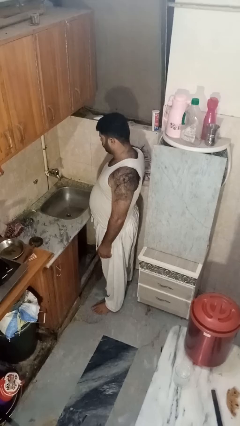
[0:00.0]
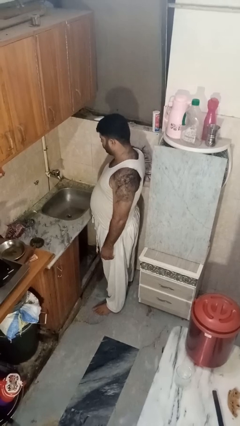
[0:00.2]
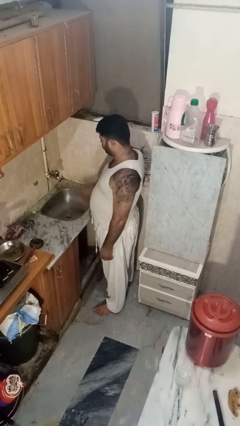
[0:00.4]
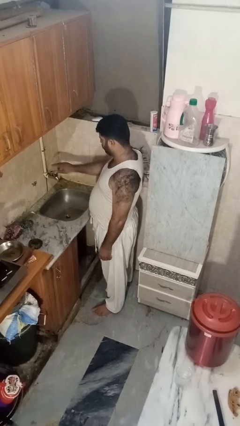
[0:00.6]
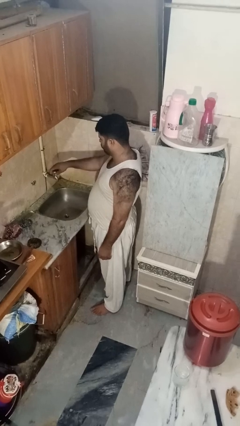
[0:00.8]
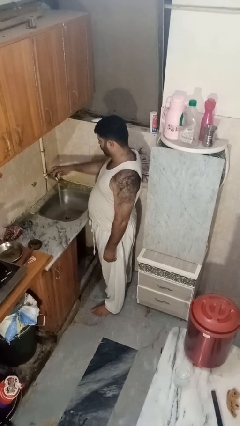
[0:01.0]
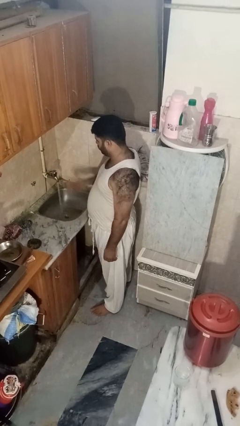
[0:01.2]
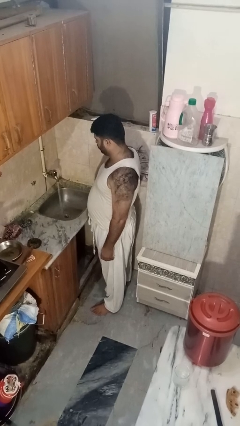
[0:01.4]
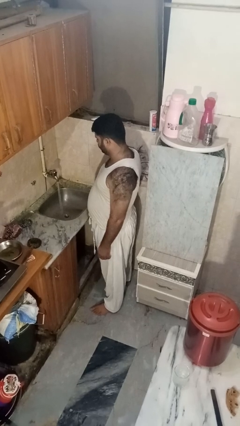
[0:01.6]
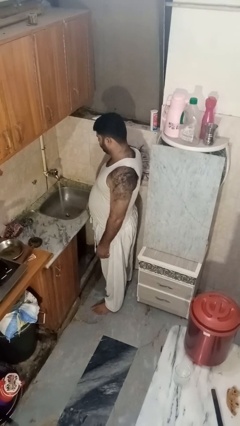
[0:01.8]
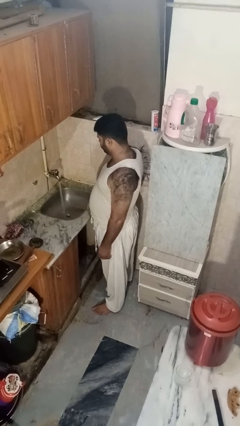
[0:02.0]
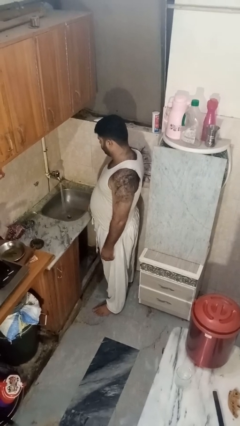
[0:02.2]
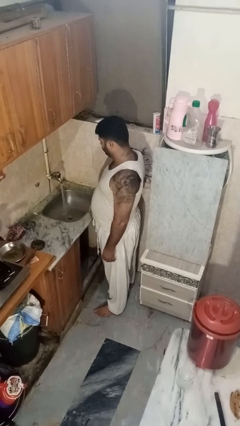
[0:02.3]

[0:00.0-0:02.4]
person turns on faucet

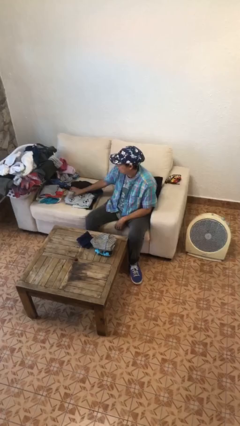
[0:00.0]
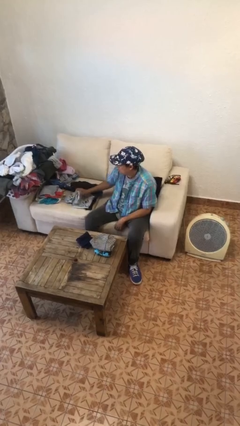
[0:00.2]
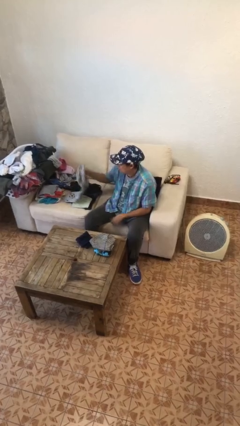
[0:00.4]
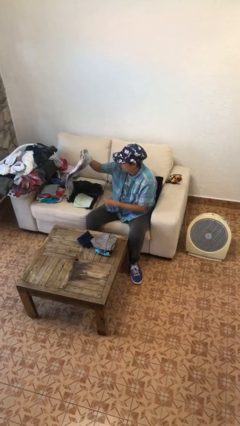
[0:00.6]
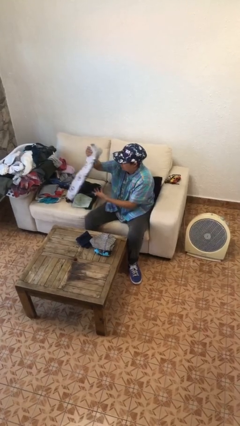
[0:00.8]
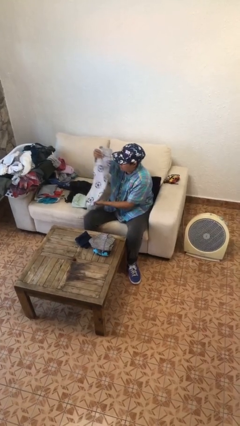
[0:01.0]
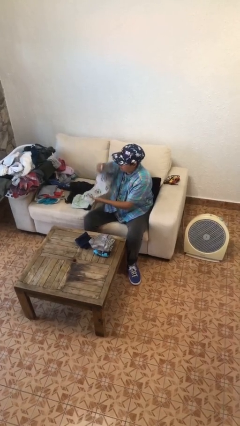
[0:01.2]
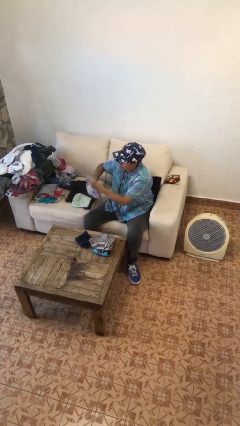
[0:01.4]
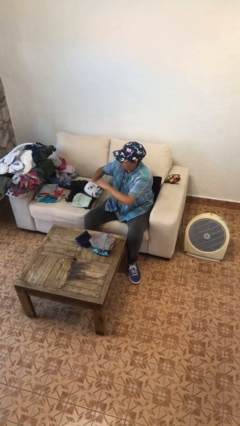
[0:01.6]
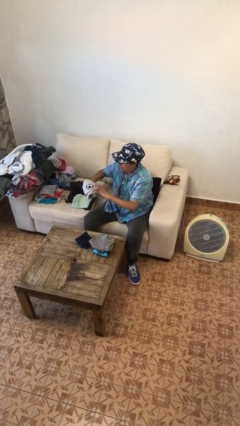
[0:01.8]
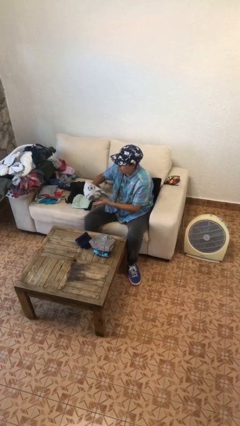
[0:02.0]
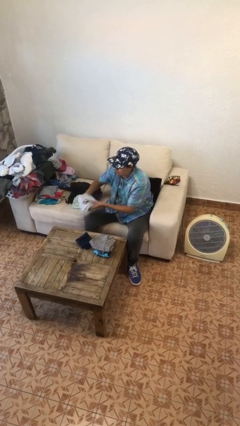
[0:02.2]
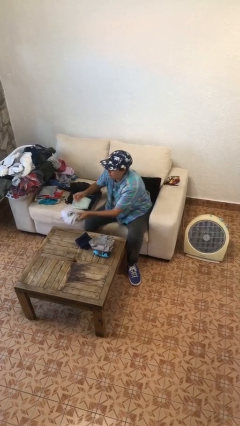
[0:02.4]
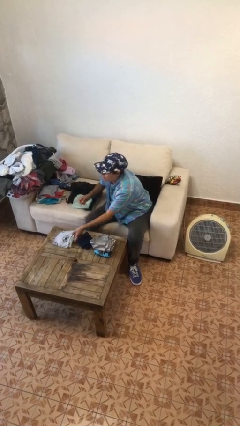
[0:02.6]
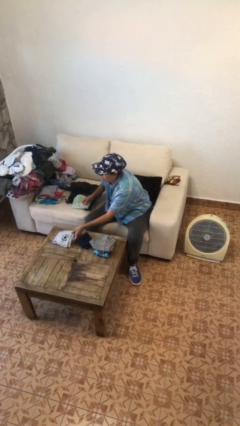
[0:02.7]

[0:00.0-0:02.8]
person folds pants

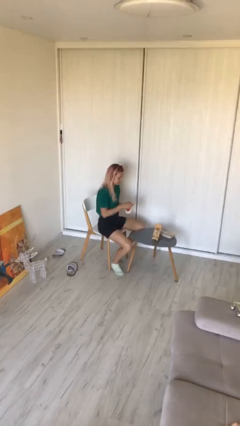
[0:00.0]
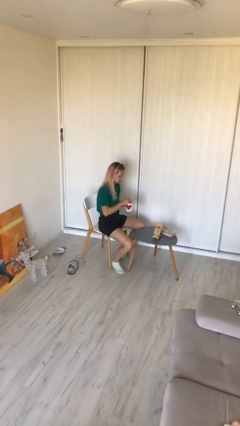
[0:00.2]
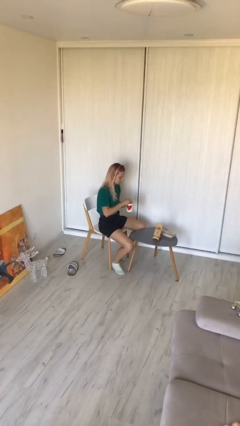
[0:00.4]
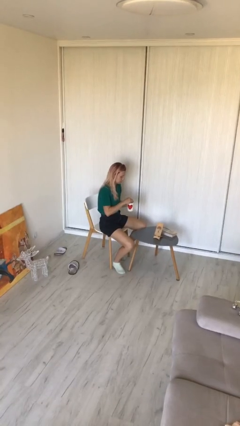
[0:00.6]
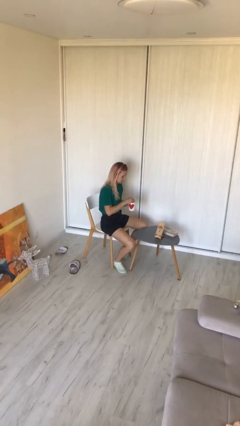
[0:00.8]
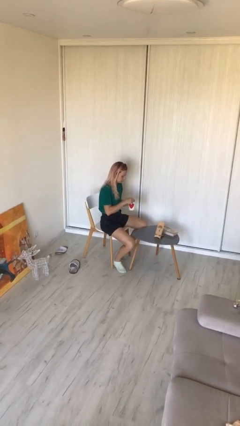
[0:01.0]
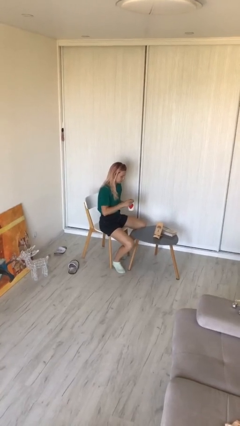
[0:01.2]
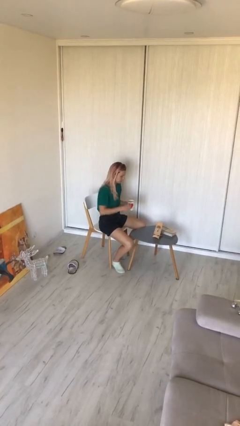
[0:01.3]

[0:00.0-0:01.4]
person stirs mug

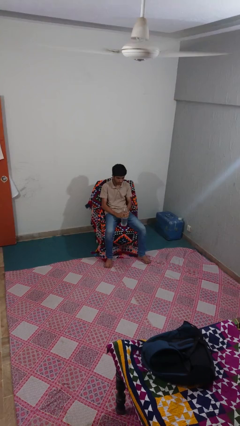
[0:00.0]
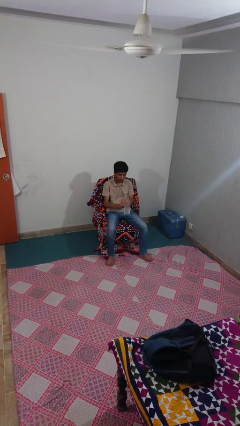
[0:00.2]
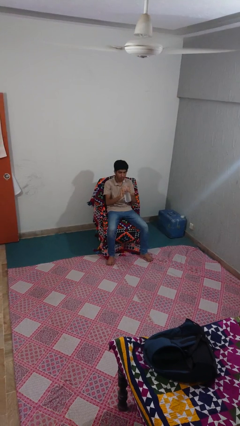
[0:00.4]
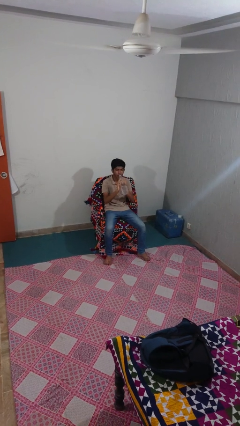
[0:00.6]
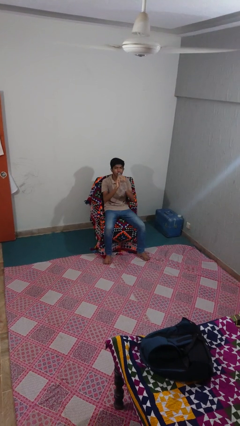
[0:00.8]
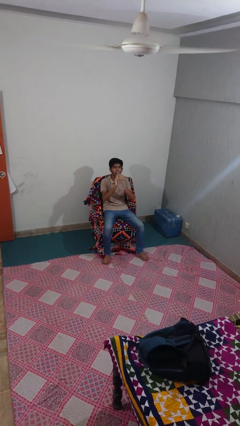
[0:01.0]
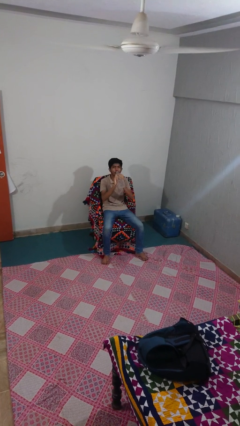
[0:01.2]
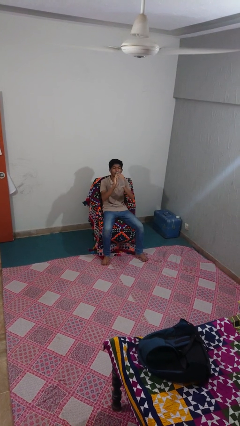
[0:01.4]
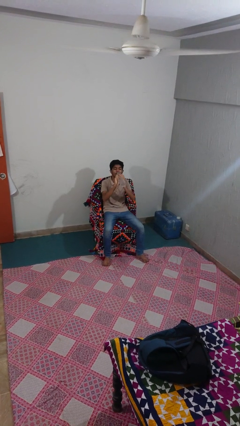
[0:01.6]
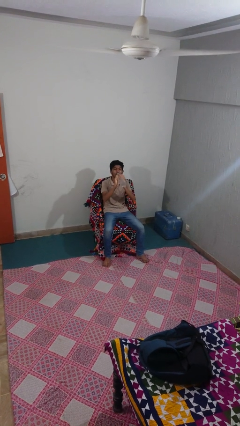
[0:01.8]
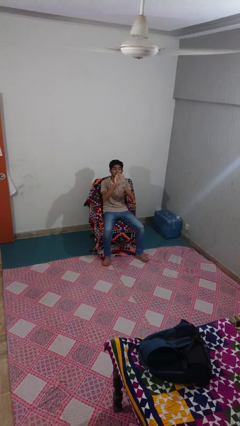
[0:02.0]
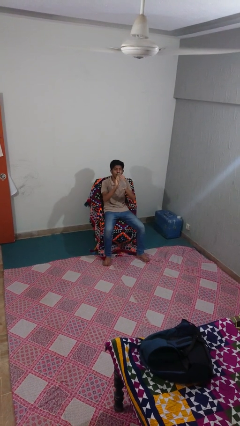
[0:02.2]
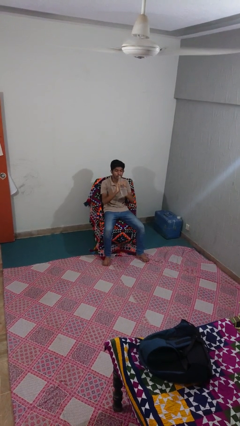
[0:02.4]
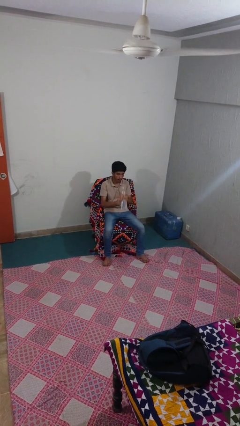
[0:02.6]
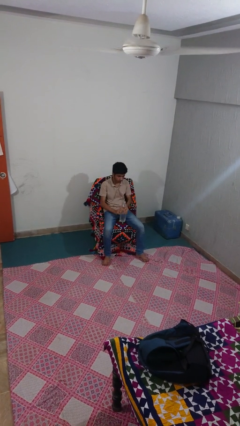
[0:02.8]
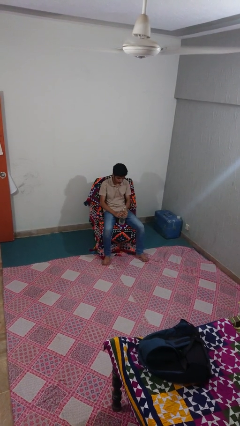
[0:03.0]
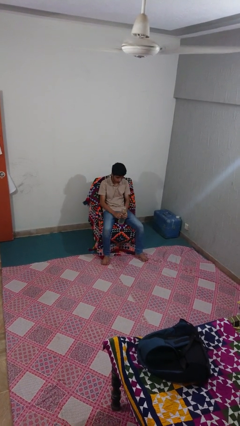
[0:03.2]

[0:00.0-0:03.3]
person drinks from bottle

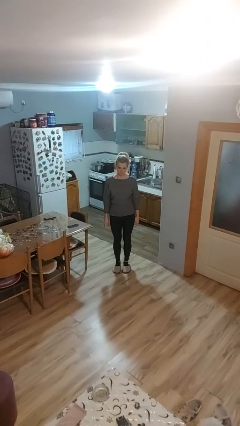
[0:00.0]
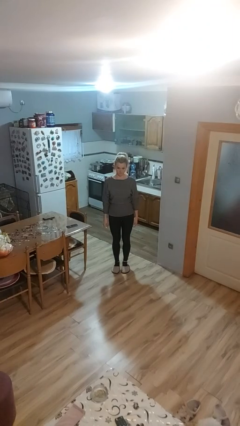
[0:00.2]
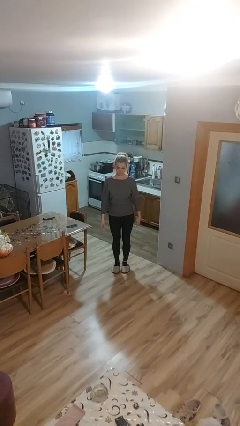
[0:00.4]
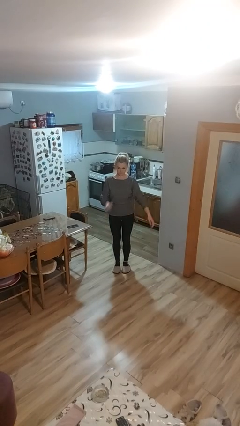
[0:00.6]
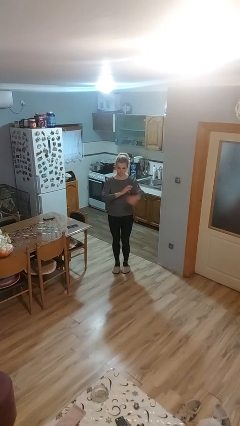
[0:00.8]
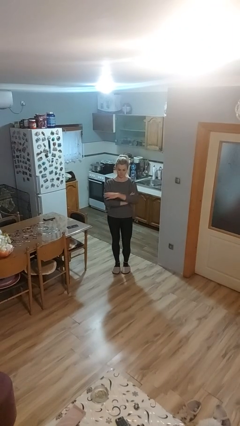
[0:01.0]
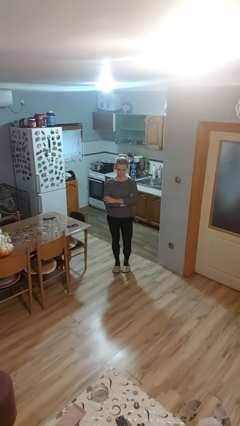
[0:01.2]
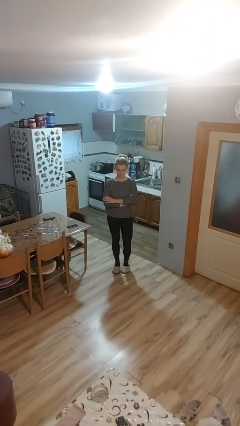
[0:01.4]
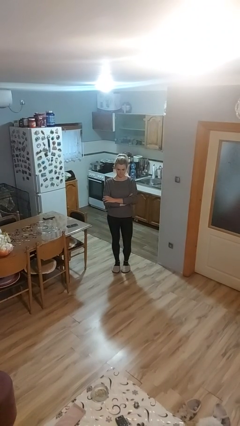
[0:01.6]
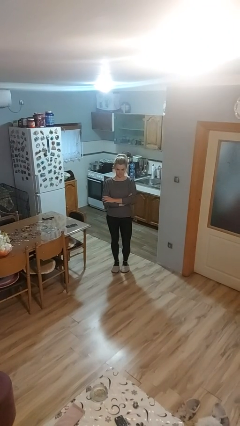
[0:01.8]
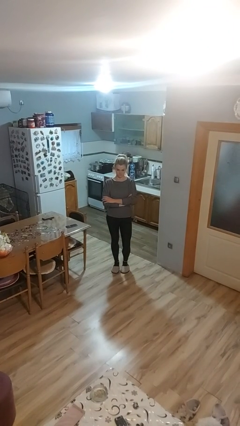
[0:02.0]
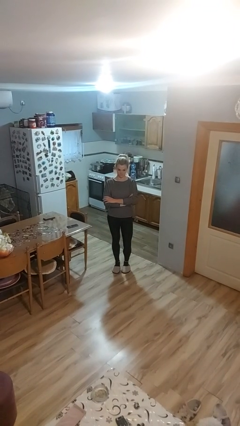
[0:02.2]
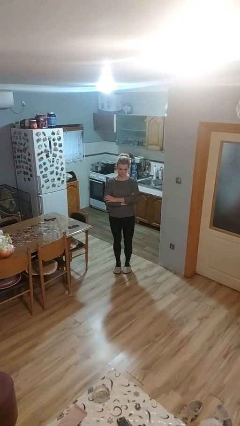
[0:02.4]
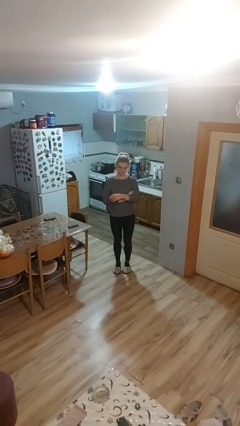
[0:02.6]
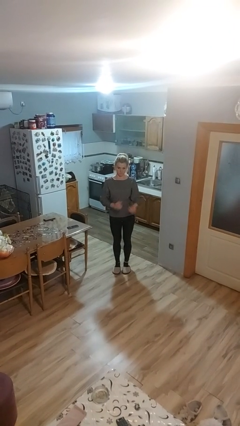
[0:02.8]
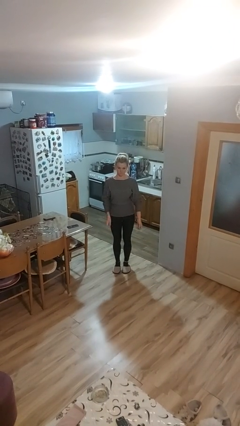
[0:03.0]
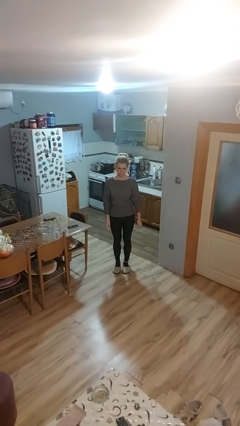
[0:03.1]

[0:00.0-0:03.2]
person crosses arms

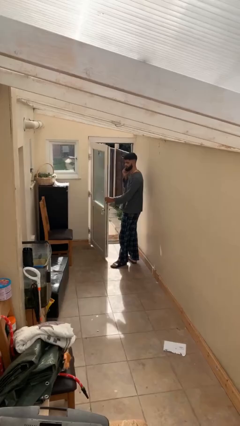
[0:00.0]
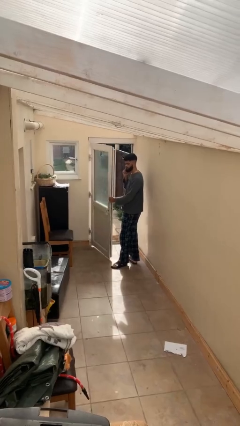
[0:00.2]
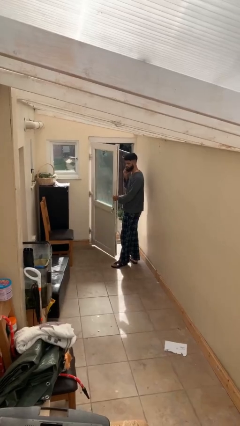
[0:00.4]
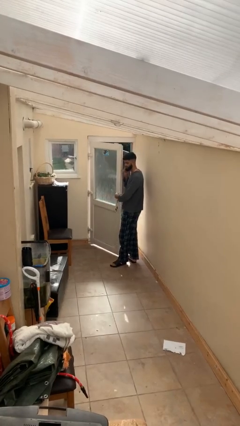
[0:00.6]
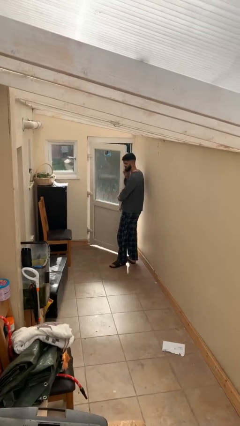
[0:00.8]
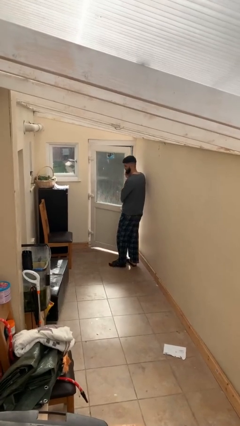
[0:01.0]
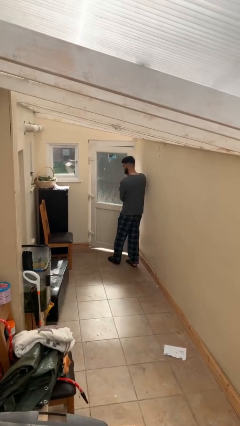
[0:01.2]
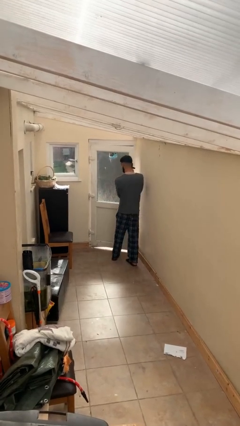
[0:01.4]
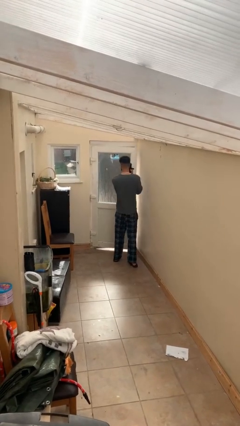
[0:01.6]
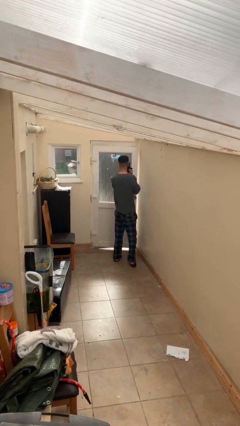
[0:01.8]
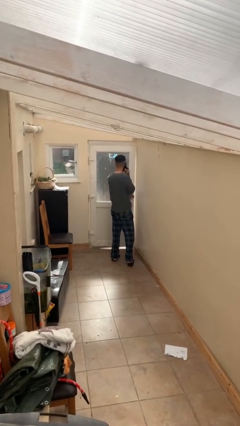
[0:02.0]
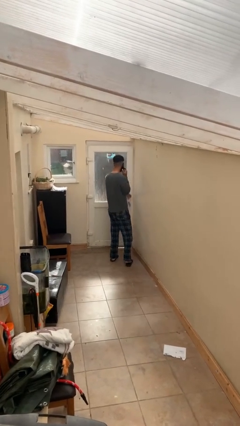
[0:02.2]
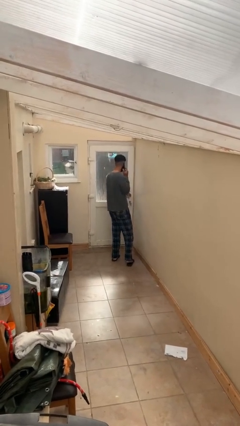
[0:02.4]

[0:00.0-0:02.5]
person closes facility door

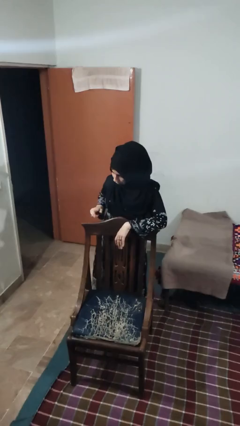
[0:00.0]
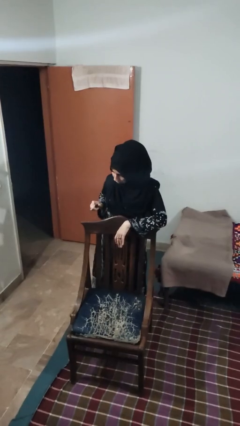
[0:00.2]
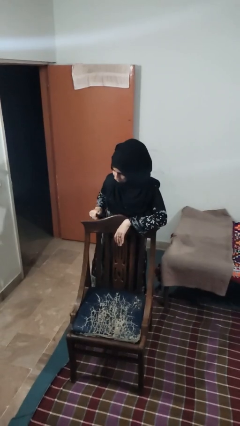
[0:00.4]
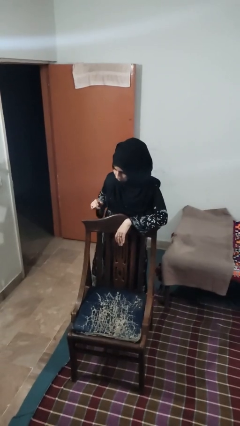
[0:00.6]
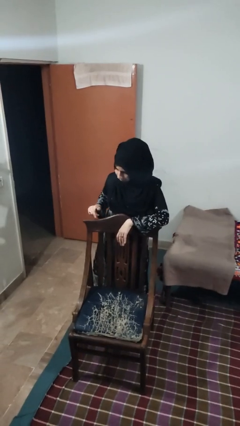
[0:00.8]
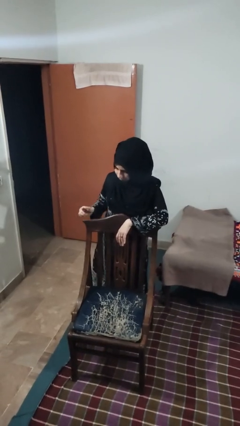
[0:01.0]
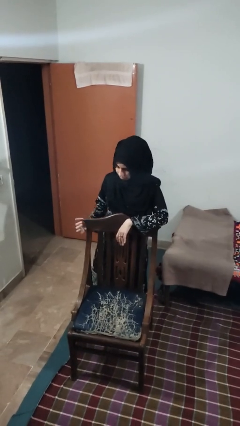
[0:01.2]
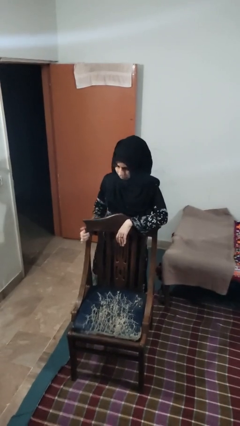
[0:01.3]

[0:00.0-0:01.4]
person taps object with finger

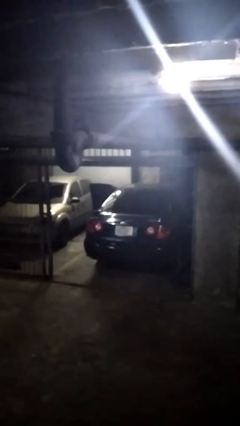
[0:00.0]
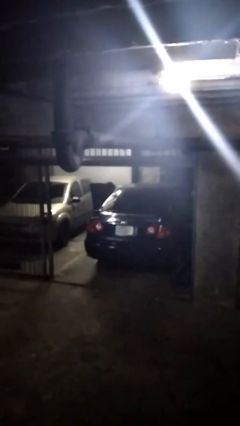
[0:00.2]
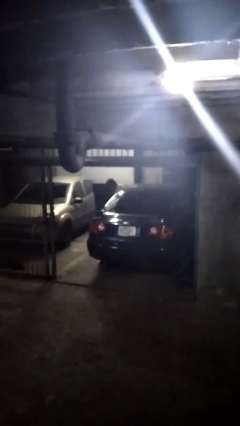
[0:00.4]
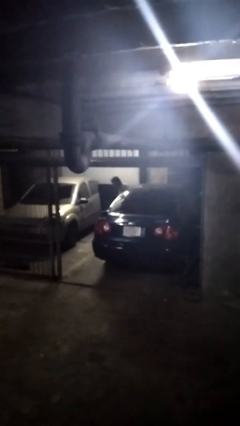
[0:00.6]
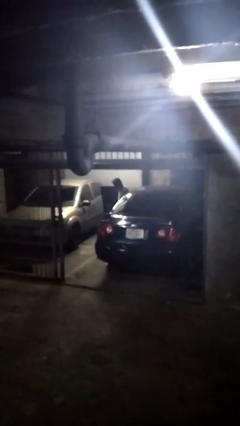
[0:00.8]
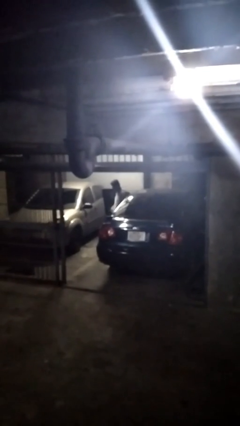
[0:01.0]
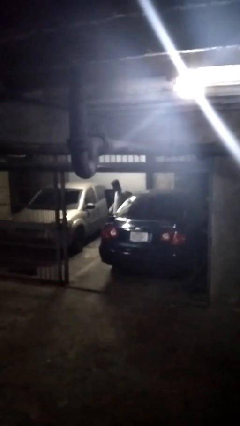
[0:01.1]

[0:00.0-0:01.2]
person exits car